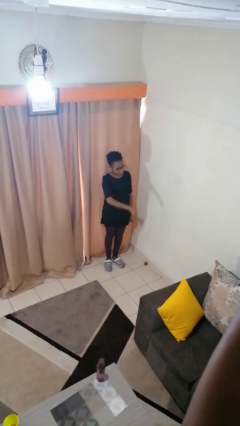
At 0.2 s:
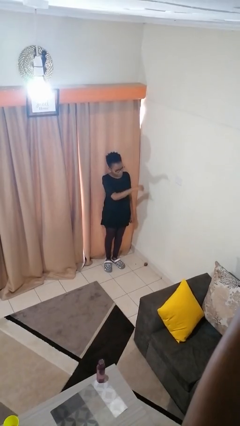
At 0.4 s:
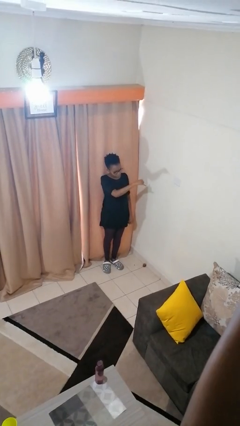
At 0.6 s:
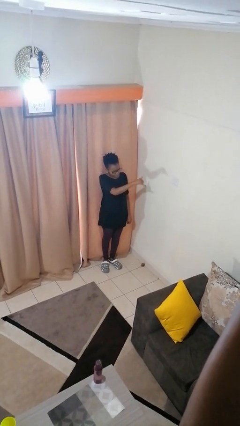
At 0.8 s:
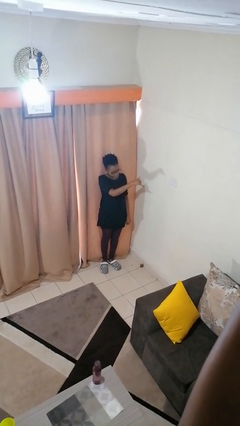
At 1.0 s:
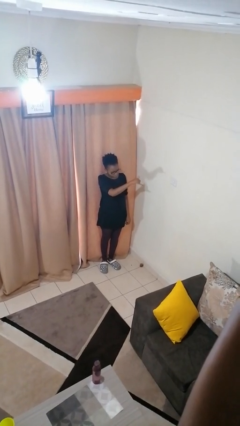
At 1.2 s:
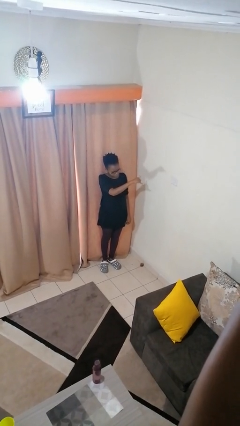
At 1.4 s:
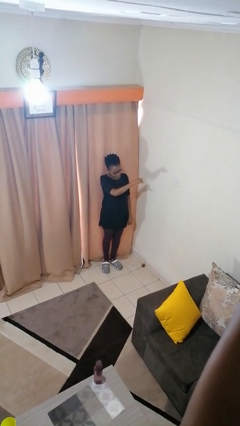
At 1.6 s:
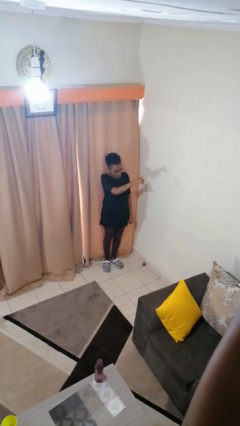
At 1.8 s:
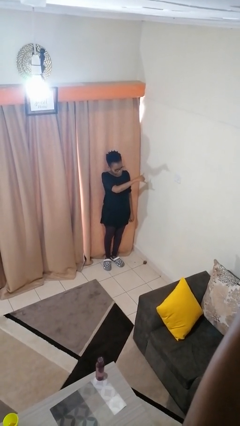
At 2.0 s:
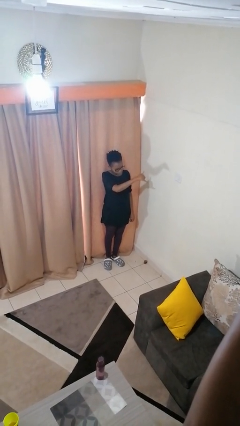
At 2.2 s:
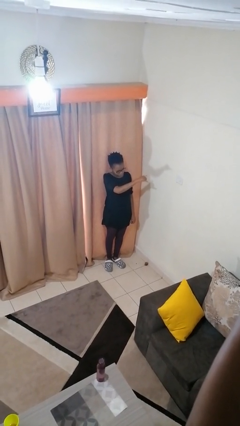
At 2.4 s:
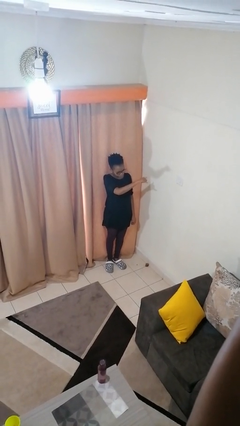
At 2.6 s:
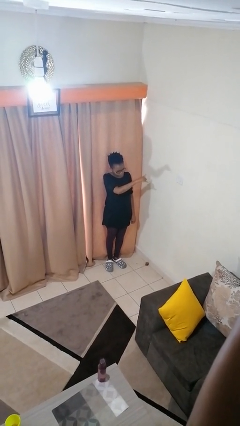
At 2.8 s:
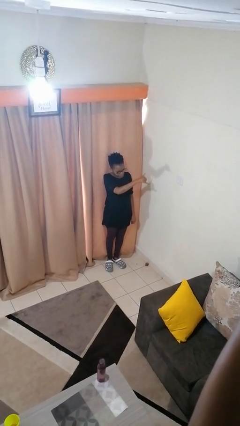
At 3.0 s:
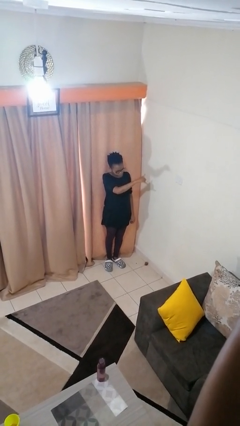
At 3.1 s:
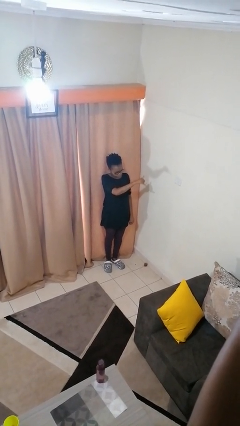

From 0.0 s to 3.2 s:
person gestures hang loose

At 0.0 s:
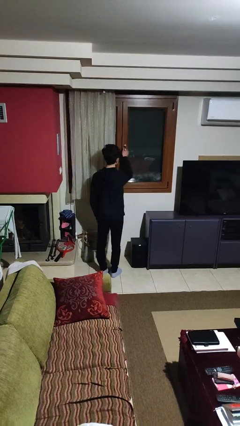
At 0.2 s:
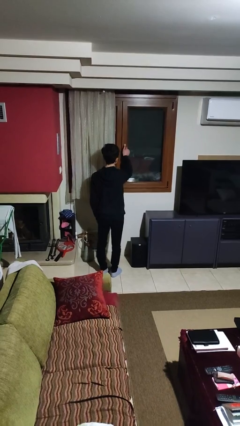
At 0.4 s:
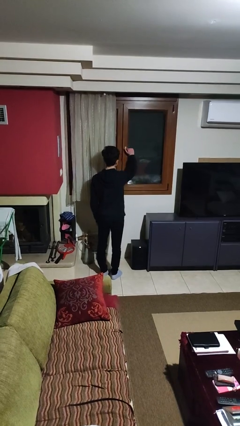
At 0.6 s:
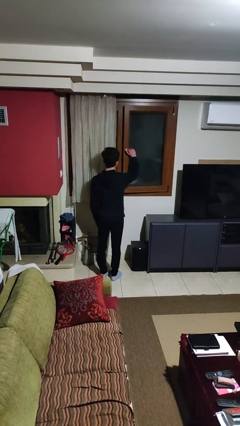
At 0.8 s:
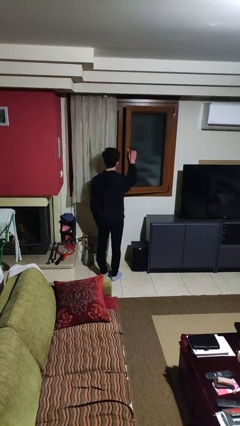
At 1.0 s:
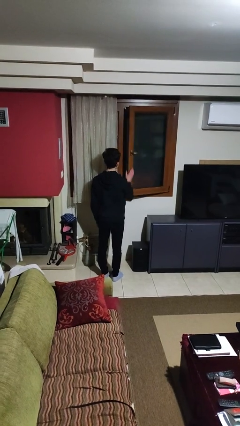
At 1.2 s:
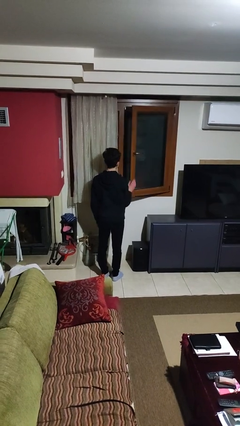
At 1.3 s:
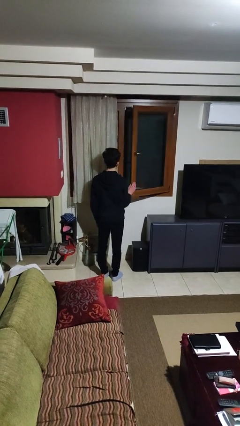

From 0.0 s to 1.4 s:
person opens home window

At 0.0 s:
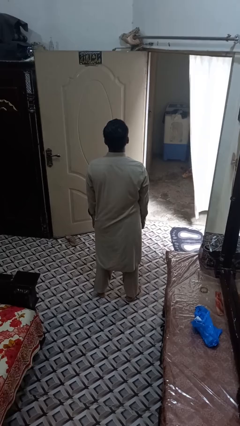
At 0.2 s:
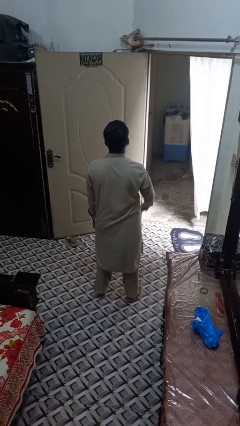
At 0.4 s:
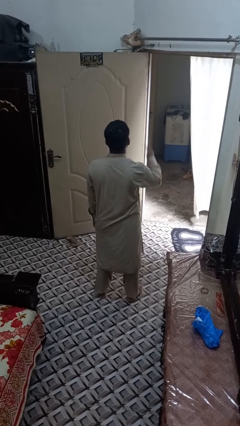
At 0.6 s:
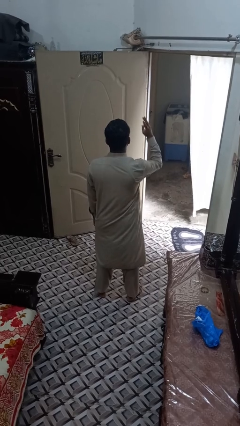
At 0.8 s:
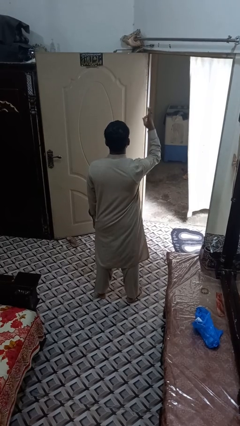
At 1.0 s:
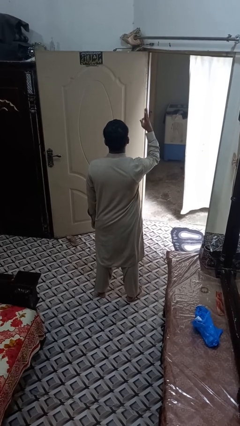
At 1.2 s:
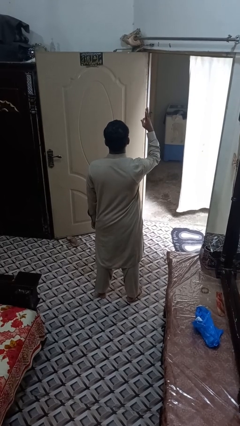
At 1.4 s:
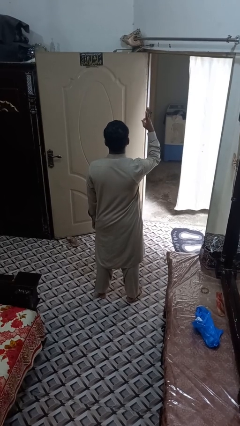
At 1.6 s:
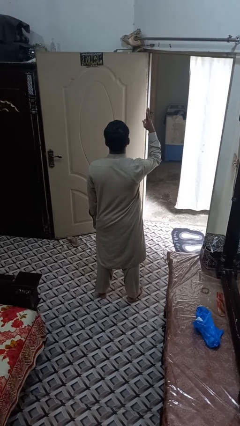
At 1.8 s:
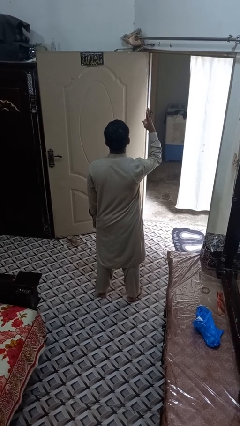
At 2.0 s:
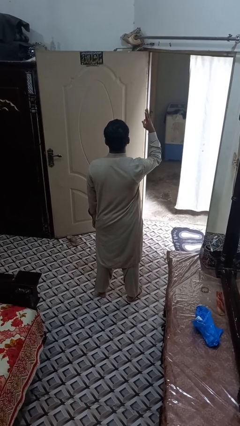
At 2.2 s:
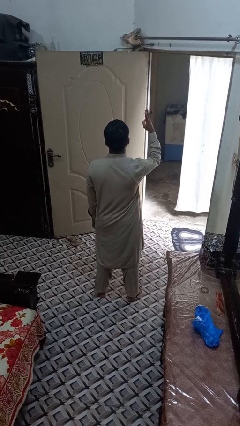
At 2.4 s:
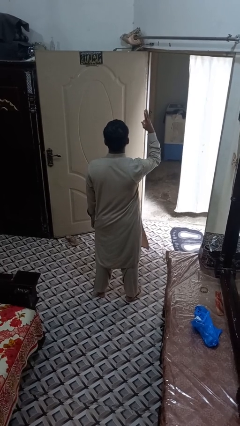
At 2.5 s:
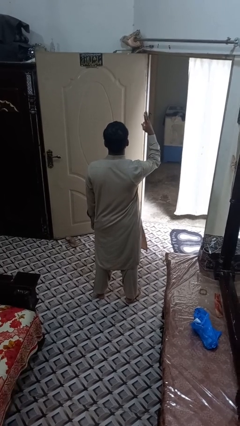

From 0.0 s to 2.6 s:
person gestures number three

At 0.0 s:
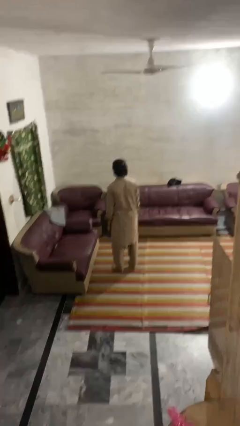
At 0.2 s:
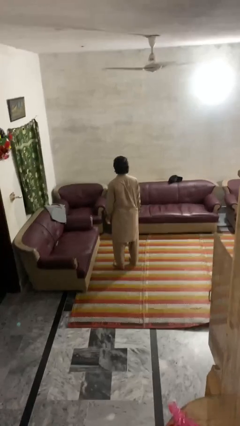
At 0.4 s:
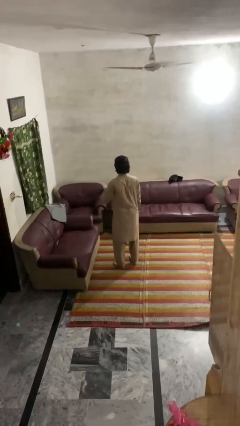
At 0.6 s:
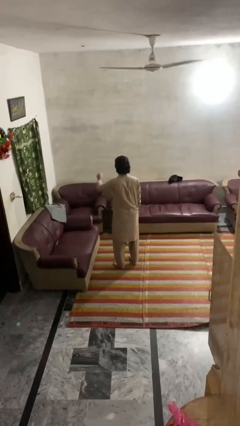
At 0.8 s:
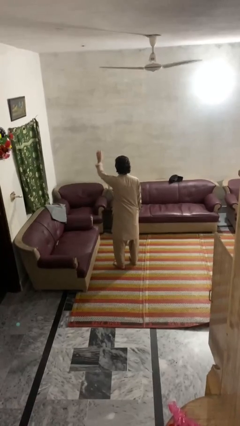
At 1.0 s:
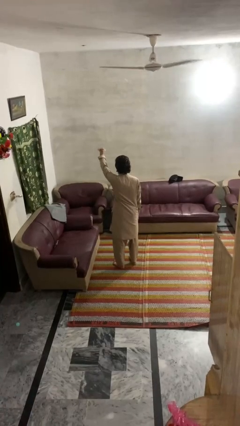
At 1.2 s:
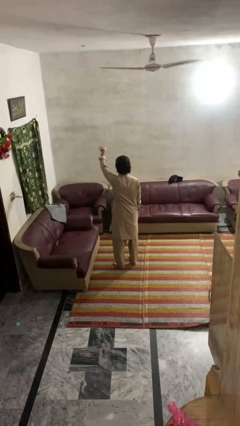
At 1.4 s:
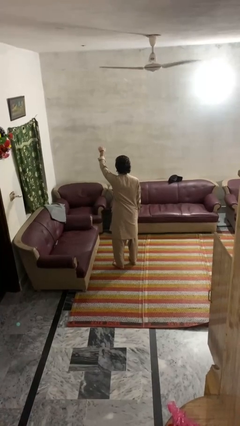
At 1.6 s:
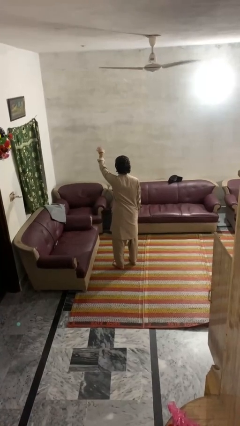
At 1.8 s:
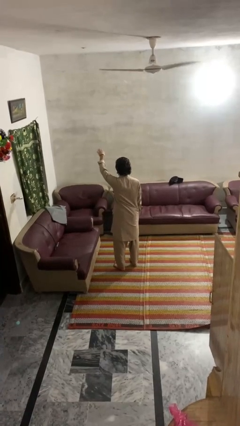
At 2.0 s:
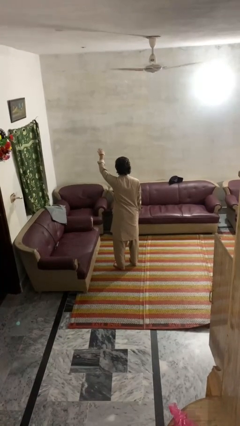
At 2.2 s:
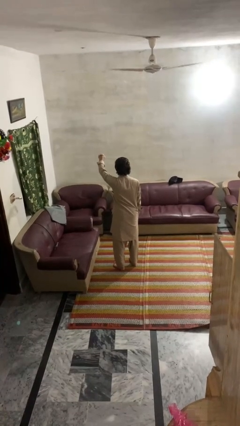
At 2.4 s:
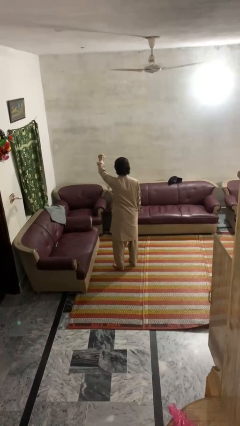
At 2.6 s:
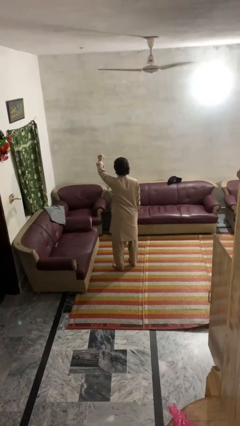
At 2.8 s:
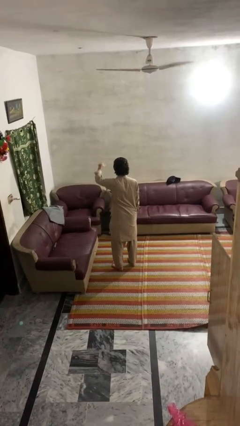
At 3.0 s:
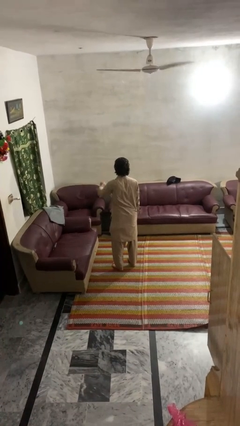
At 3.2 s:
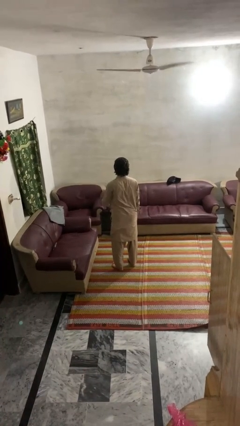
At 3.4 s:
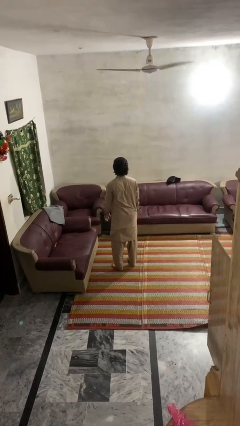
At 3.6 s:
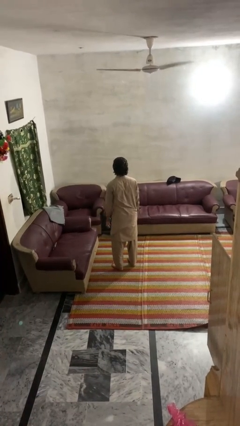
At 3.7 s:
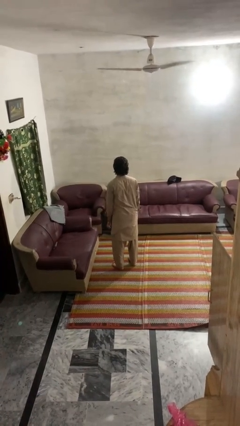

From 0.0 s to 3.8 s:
person gestures come here

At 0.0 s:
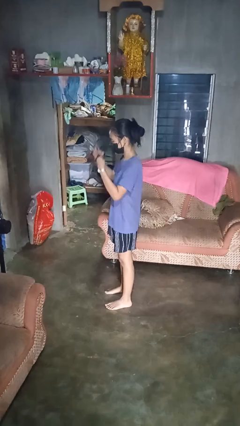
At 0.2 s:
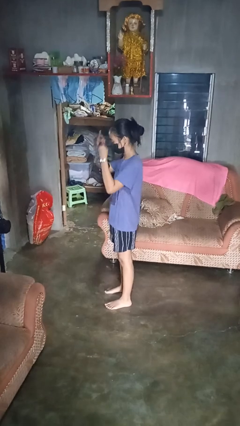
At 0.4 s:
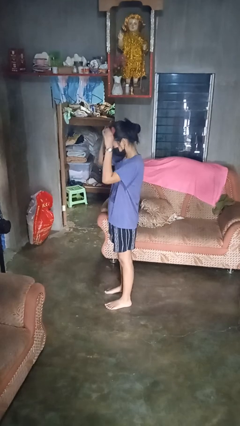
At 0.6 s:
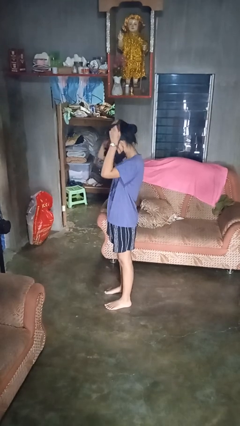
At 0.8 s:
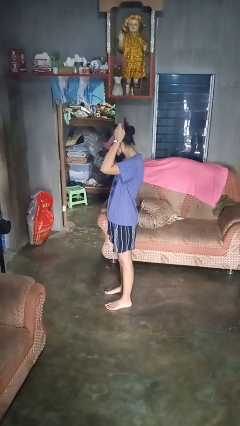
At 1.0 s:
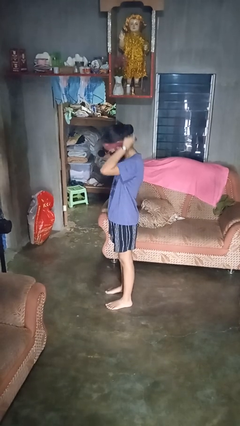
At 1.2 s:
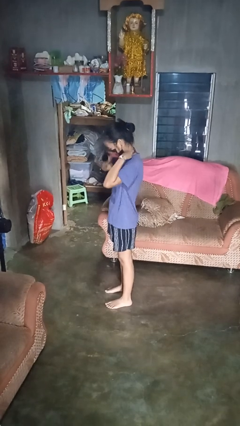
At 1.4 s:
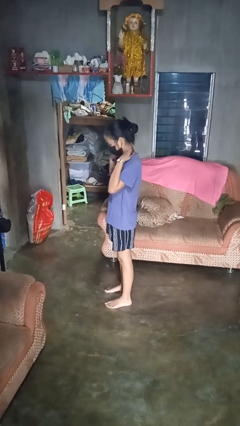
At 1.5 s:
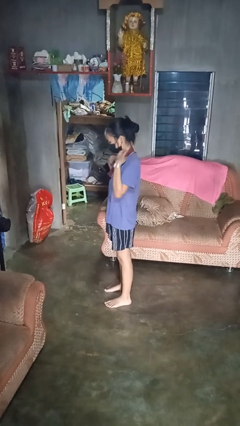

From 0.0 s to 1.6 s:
person puts on necklace

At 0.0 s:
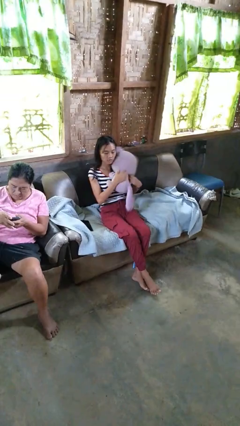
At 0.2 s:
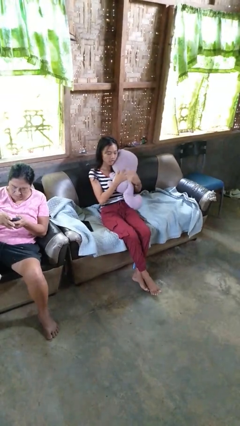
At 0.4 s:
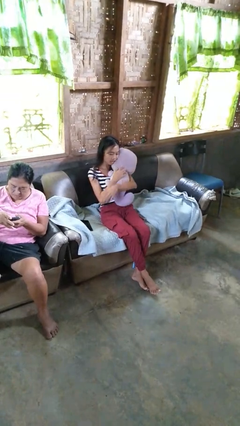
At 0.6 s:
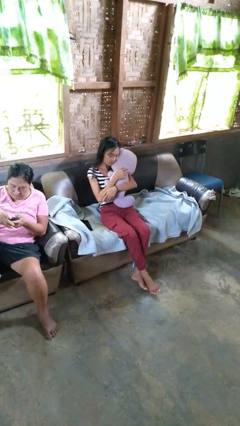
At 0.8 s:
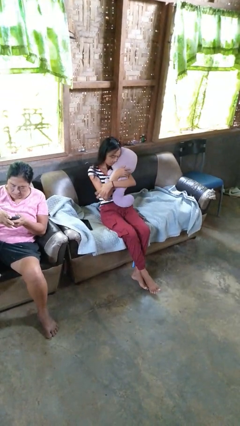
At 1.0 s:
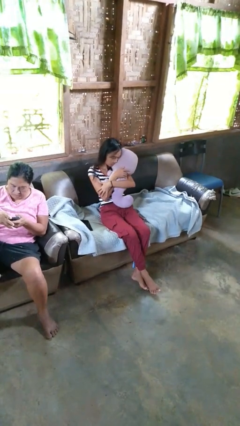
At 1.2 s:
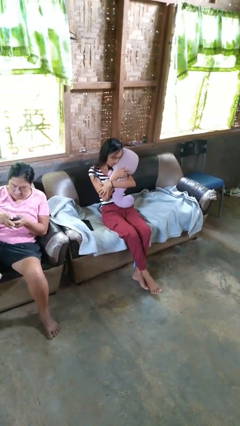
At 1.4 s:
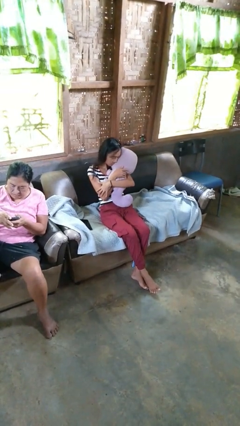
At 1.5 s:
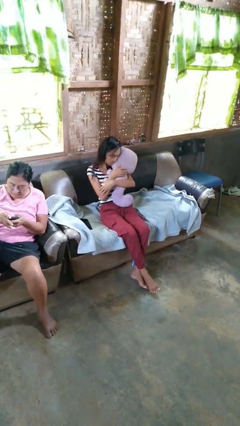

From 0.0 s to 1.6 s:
person hugs stuffed animal

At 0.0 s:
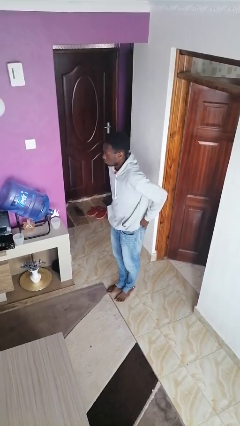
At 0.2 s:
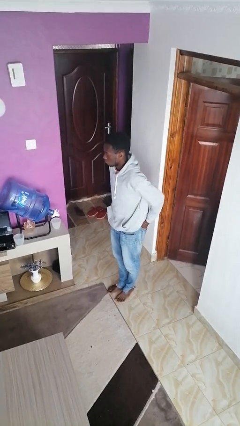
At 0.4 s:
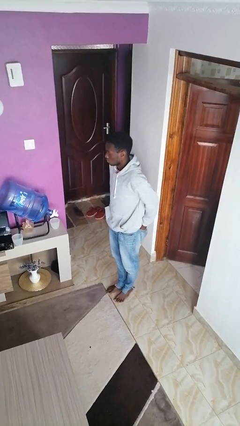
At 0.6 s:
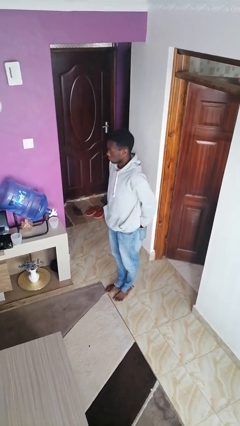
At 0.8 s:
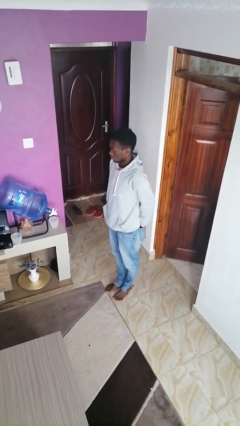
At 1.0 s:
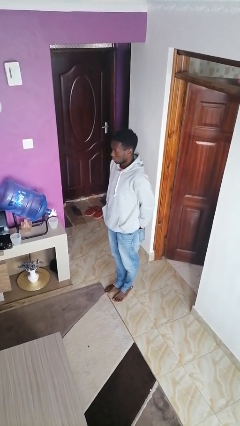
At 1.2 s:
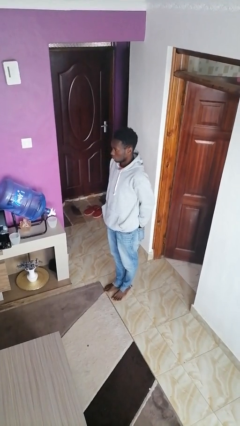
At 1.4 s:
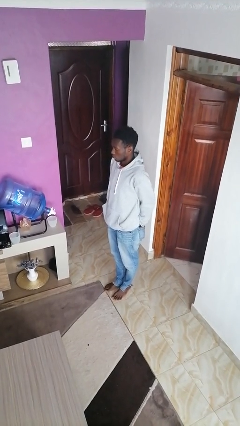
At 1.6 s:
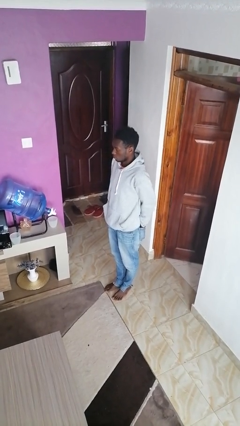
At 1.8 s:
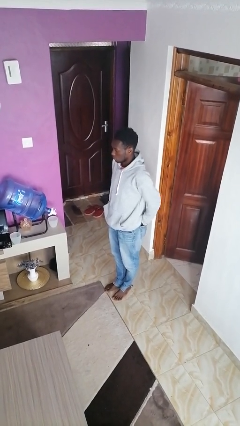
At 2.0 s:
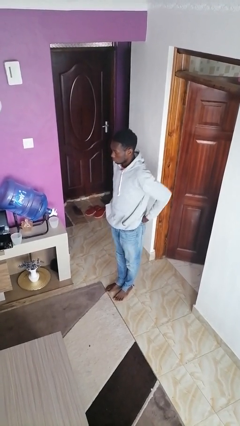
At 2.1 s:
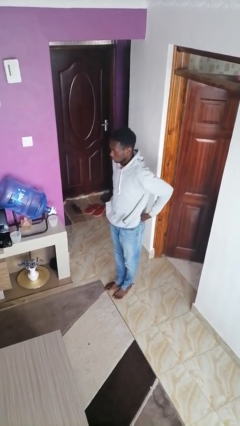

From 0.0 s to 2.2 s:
person puts hands in back pockets

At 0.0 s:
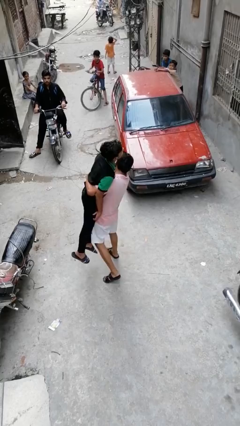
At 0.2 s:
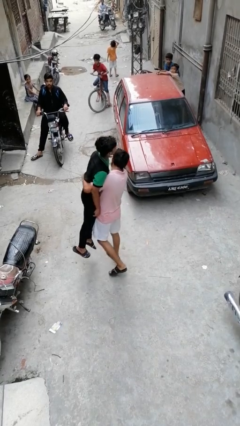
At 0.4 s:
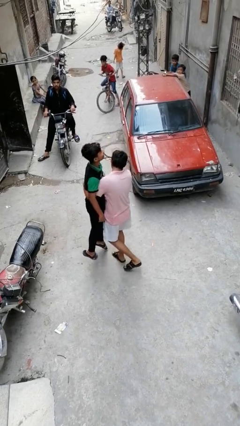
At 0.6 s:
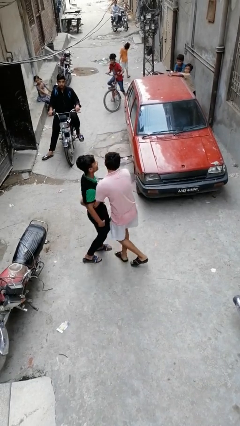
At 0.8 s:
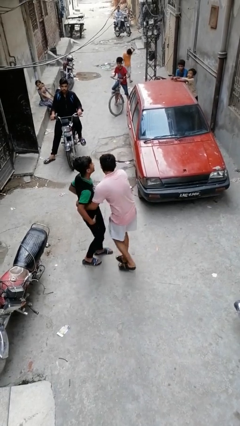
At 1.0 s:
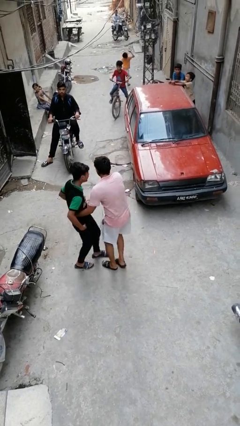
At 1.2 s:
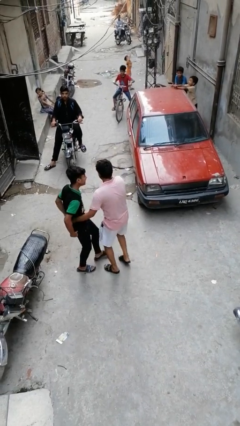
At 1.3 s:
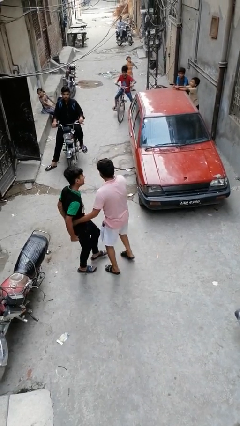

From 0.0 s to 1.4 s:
person puts down person
